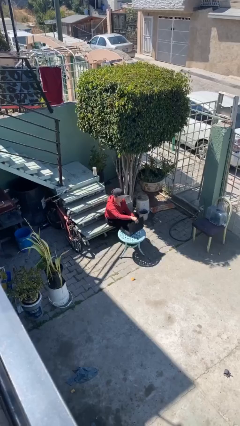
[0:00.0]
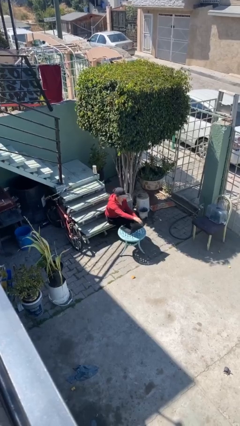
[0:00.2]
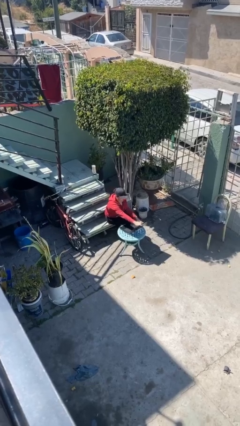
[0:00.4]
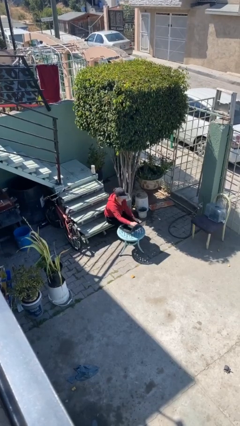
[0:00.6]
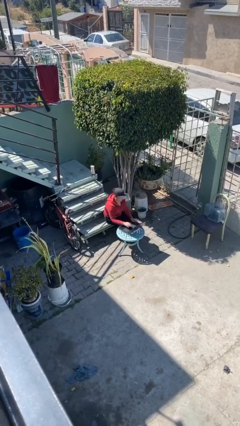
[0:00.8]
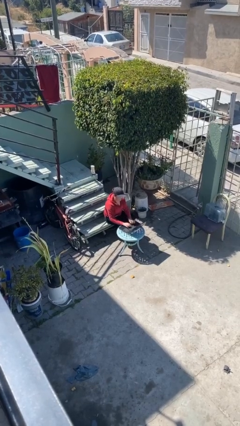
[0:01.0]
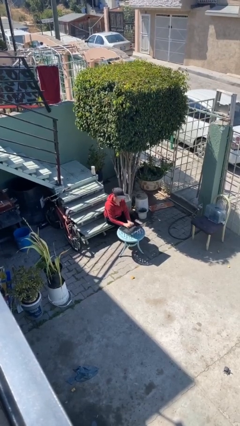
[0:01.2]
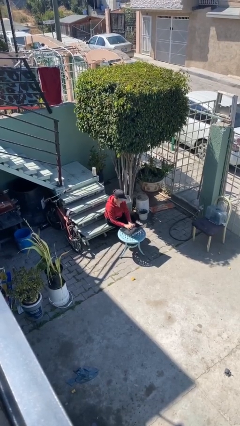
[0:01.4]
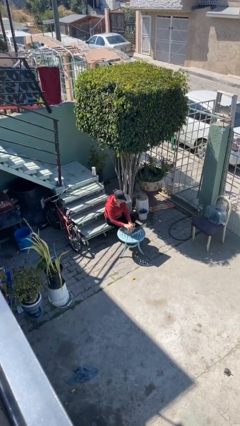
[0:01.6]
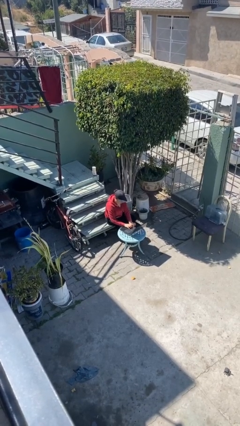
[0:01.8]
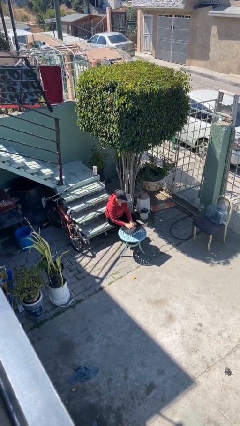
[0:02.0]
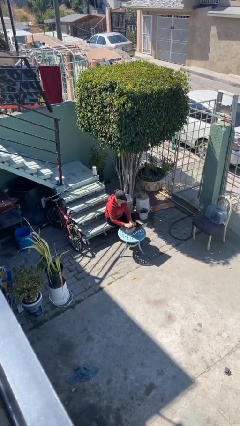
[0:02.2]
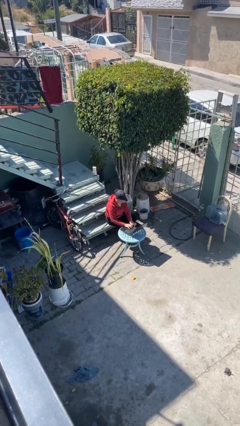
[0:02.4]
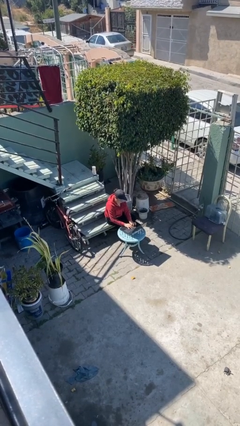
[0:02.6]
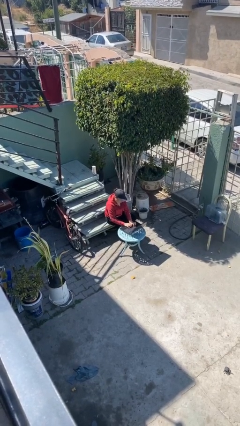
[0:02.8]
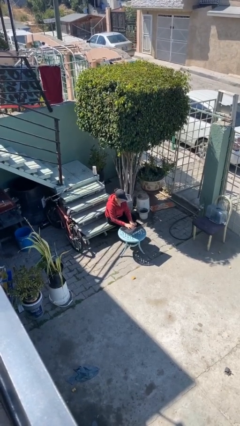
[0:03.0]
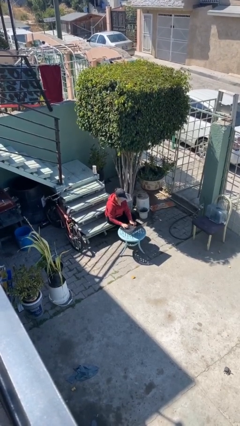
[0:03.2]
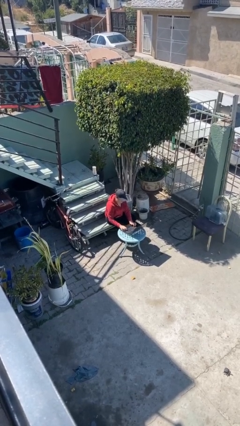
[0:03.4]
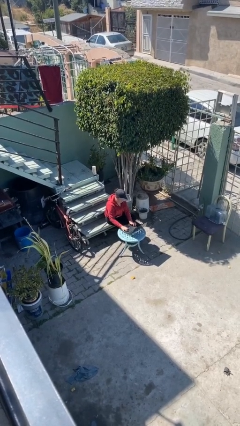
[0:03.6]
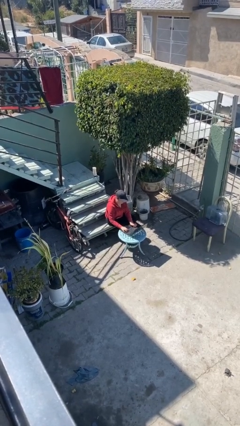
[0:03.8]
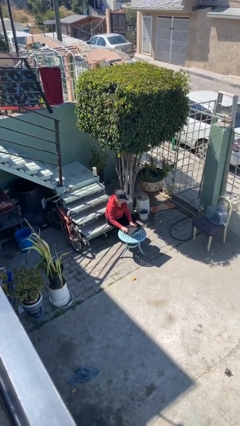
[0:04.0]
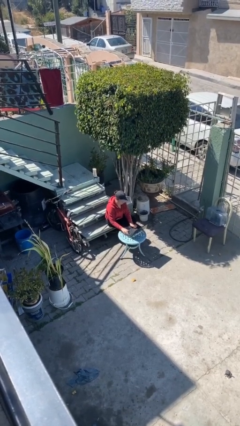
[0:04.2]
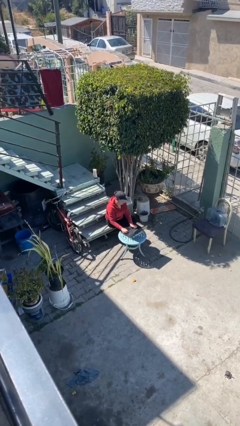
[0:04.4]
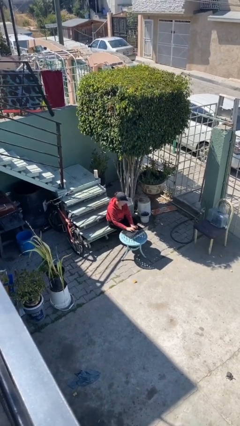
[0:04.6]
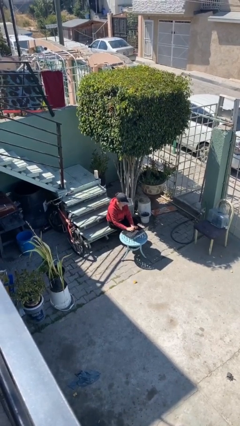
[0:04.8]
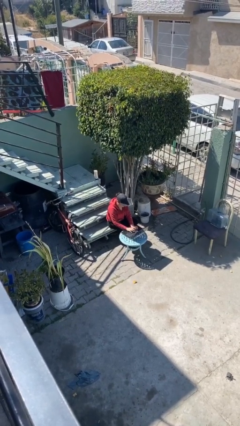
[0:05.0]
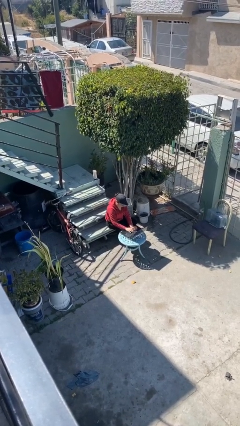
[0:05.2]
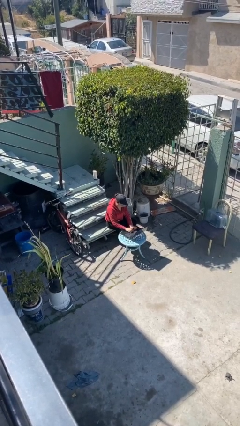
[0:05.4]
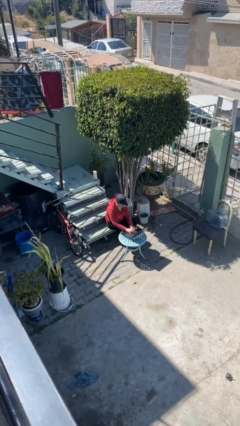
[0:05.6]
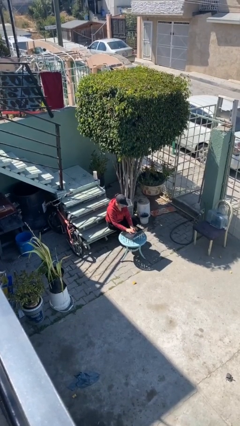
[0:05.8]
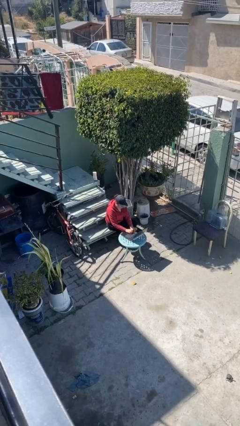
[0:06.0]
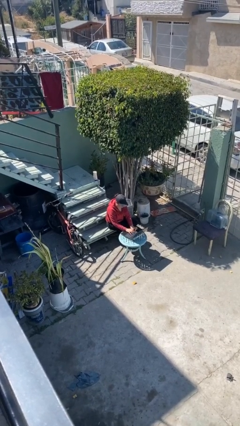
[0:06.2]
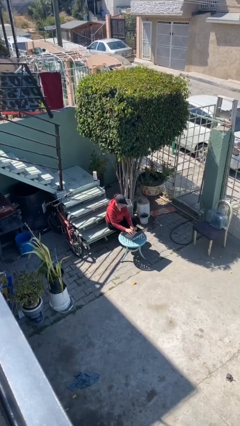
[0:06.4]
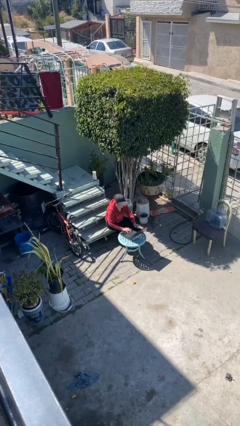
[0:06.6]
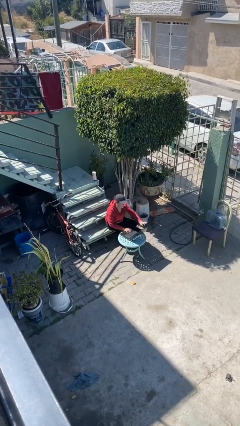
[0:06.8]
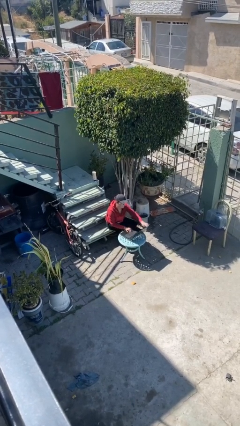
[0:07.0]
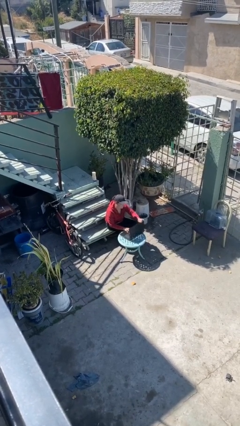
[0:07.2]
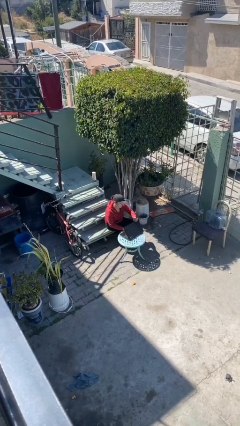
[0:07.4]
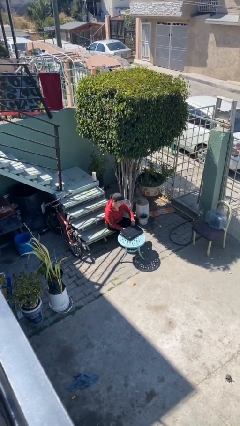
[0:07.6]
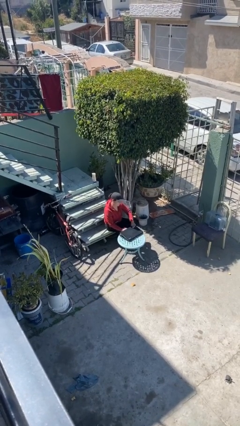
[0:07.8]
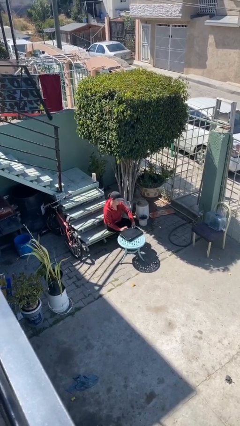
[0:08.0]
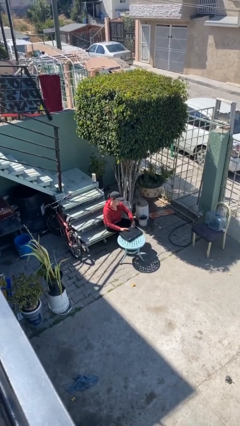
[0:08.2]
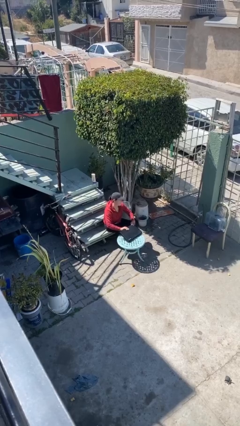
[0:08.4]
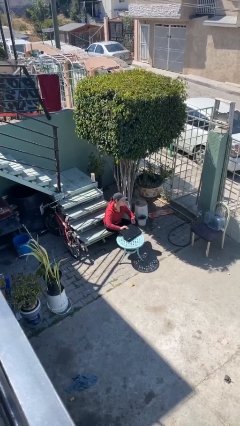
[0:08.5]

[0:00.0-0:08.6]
person interacts with laptop

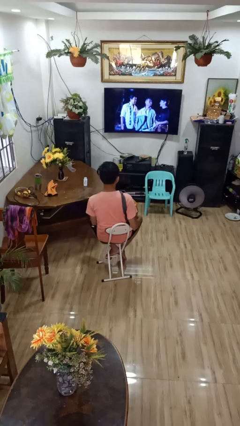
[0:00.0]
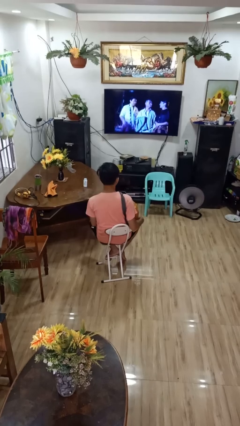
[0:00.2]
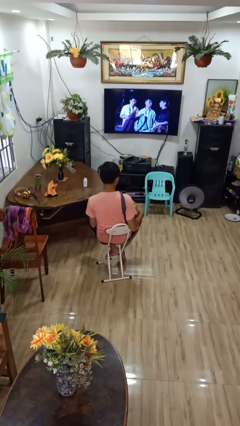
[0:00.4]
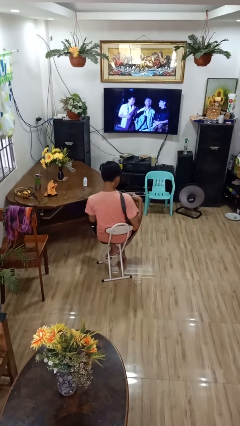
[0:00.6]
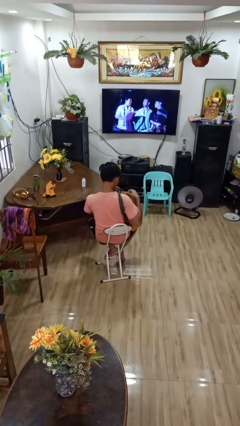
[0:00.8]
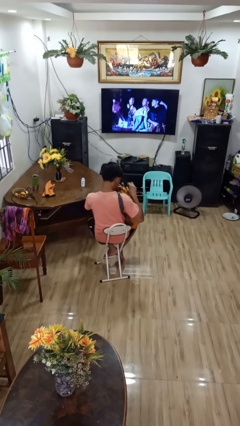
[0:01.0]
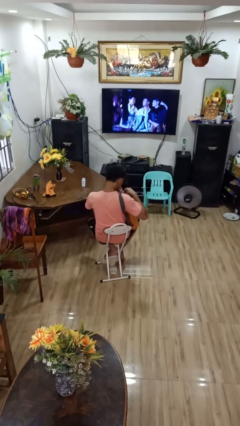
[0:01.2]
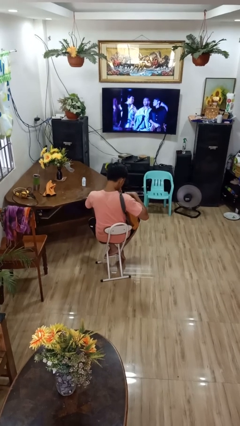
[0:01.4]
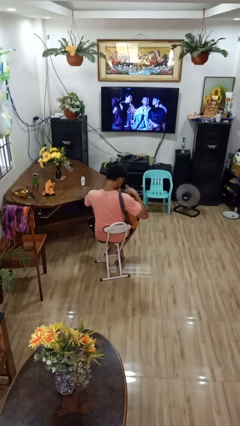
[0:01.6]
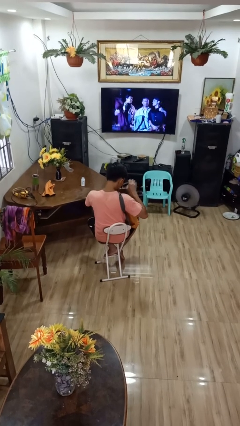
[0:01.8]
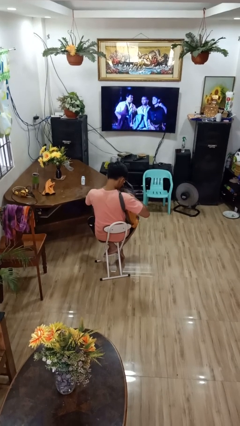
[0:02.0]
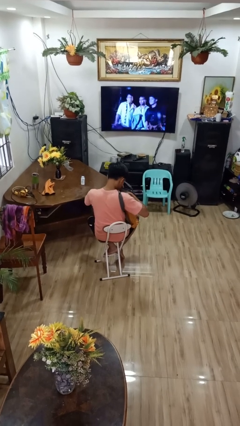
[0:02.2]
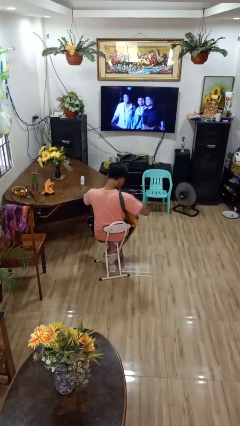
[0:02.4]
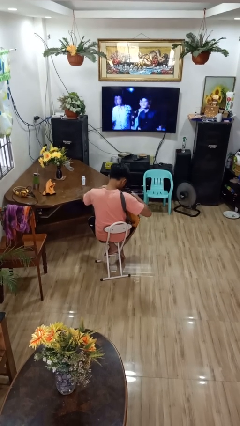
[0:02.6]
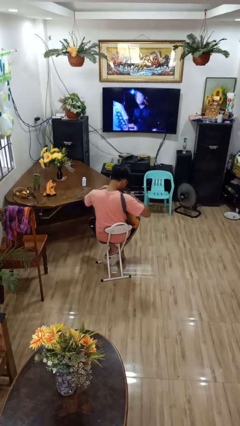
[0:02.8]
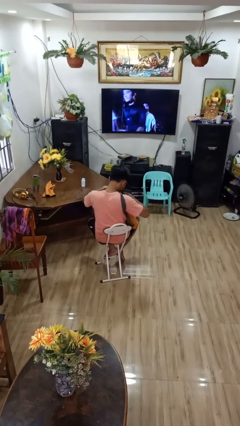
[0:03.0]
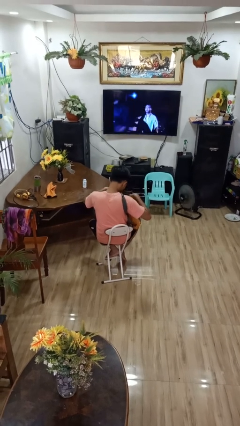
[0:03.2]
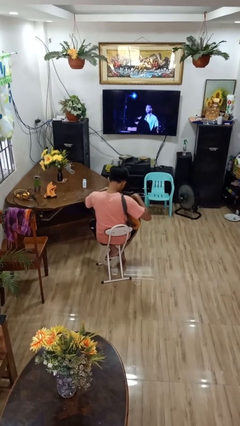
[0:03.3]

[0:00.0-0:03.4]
person searches in backpack

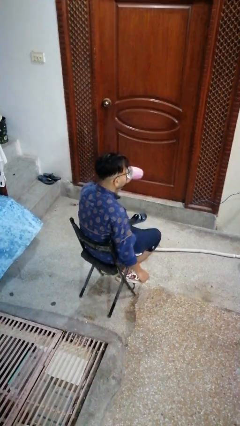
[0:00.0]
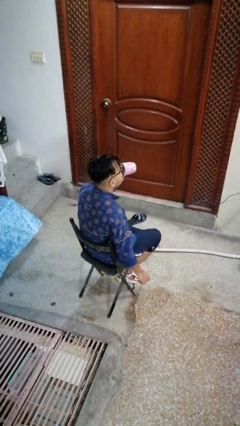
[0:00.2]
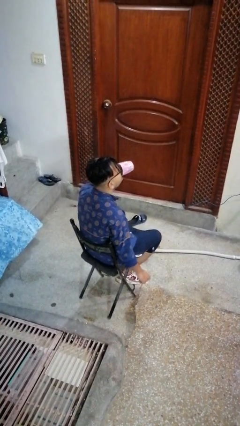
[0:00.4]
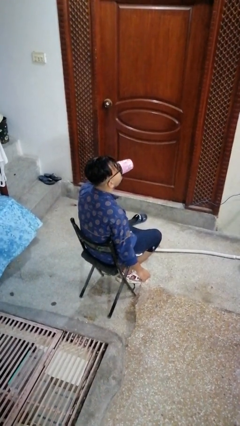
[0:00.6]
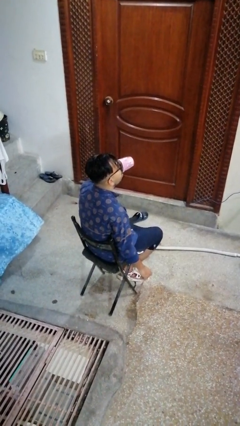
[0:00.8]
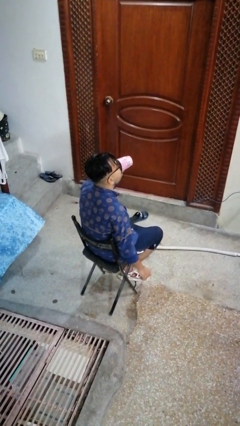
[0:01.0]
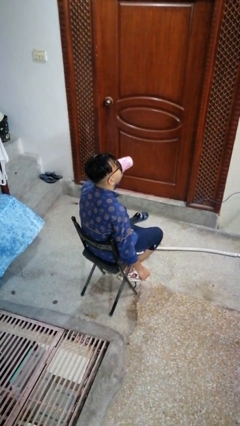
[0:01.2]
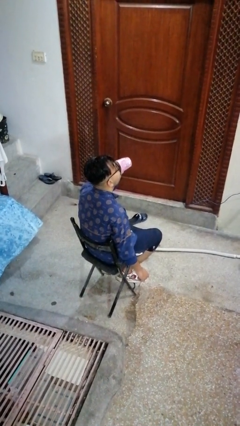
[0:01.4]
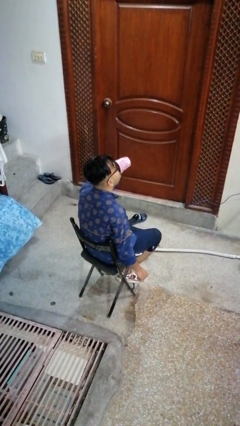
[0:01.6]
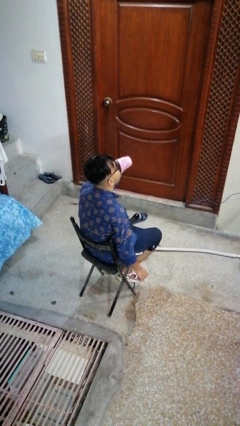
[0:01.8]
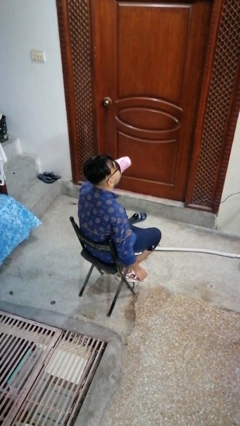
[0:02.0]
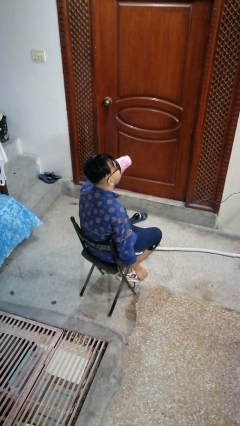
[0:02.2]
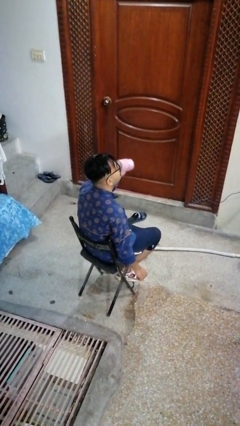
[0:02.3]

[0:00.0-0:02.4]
person drinks from mug

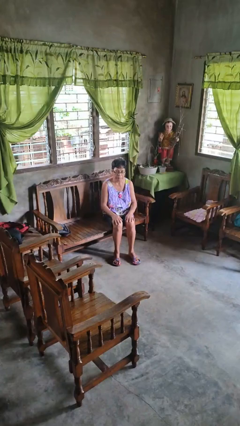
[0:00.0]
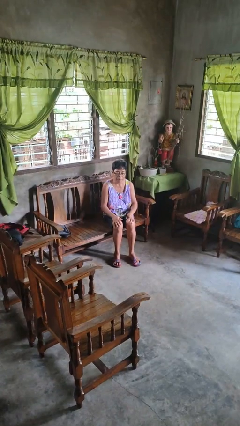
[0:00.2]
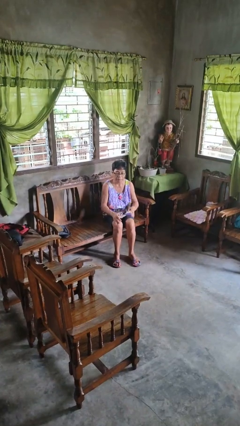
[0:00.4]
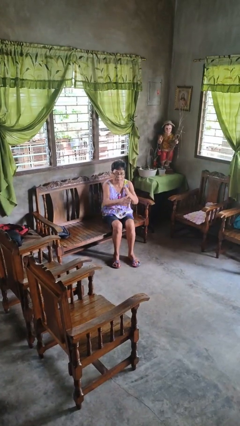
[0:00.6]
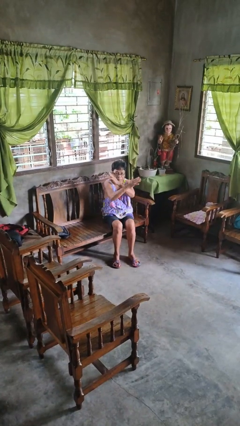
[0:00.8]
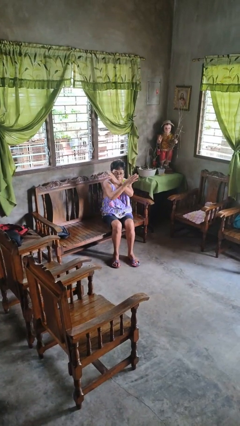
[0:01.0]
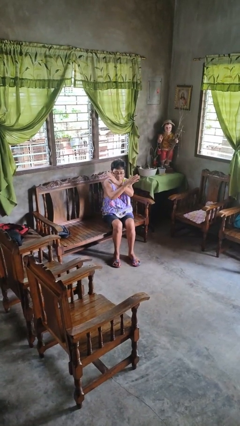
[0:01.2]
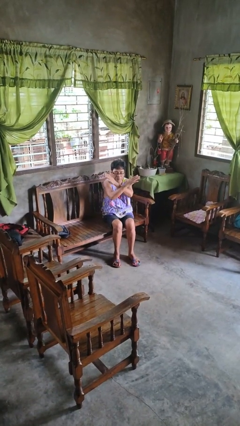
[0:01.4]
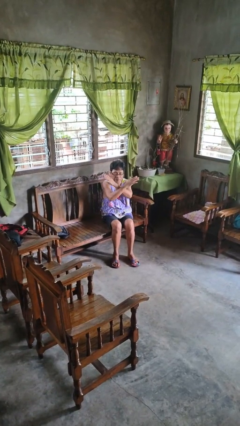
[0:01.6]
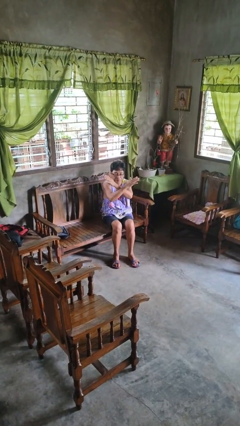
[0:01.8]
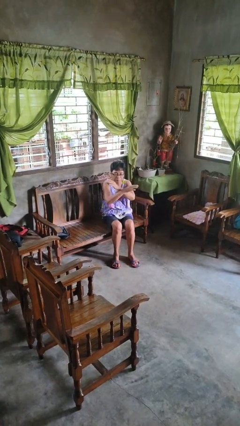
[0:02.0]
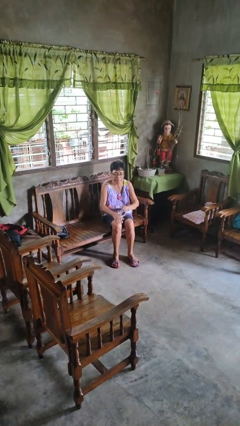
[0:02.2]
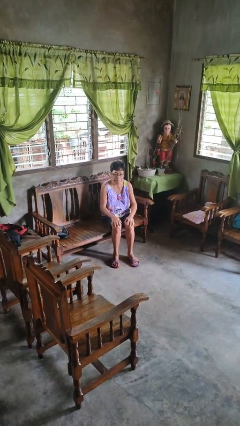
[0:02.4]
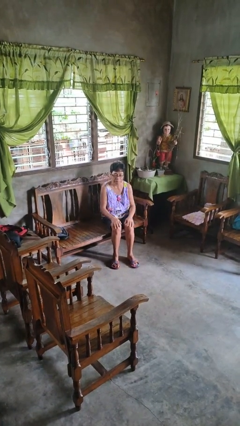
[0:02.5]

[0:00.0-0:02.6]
person gestures arms x

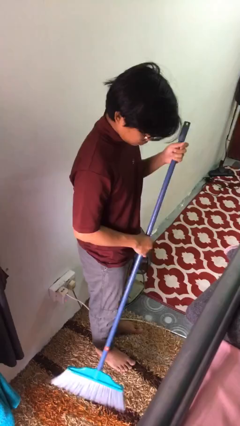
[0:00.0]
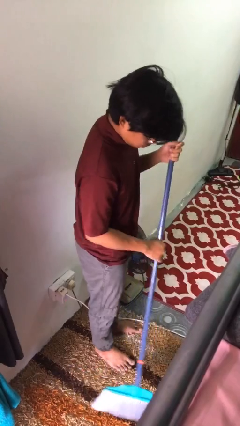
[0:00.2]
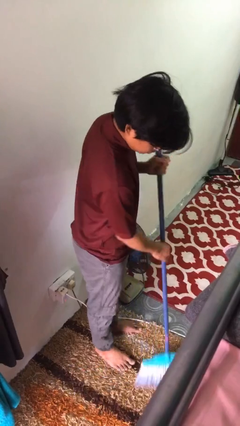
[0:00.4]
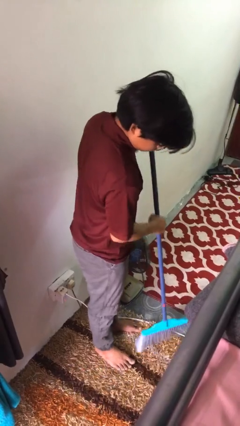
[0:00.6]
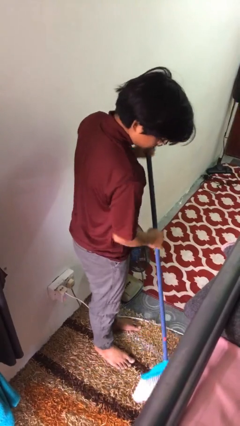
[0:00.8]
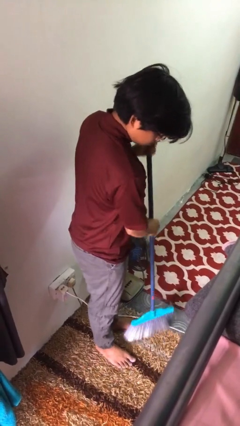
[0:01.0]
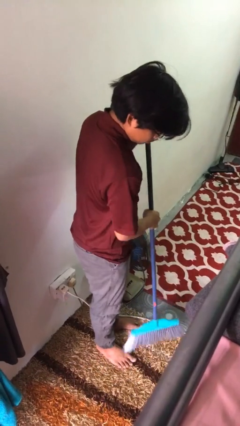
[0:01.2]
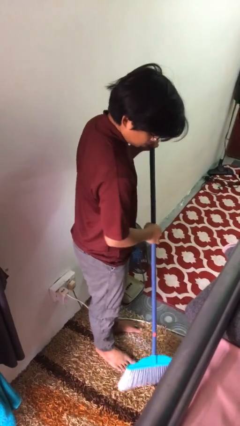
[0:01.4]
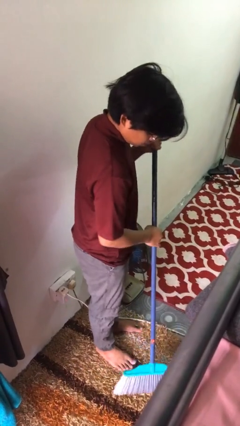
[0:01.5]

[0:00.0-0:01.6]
person sweeps floor
